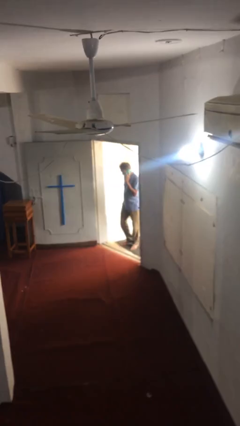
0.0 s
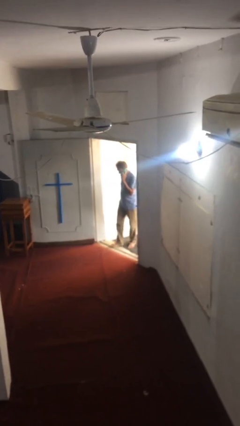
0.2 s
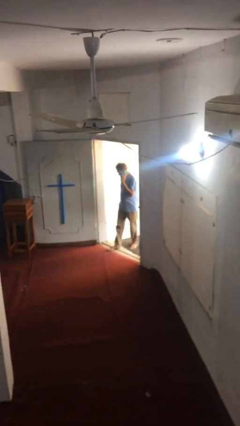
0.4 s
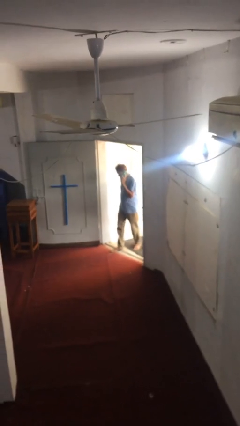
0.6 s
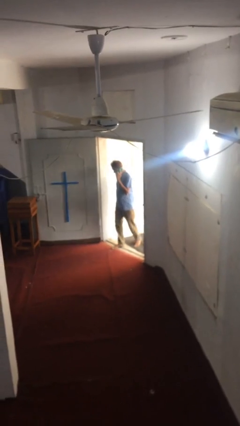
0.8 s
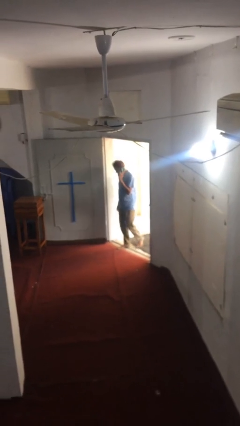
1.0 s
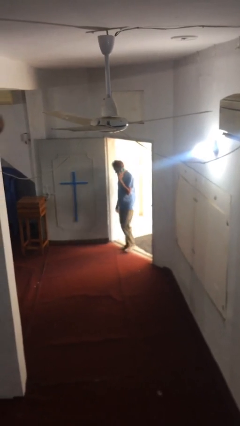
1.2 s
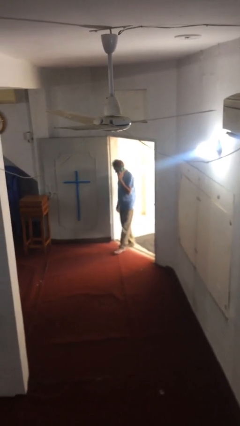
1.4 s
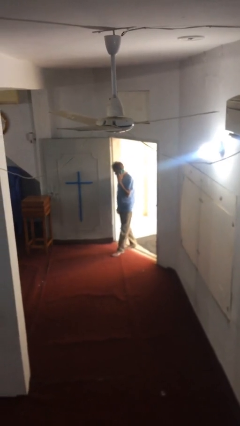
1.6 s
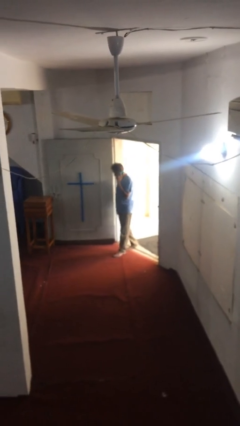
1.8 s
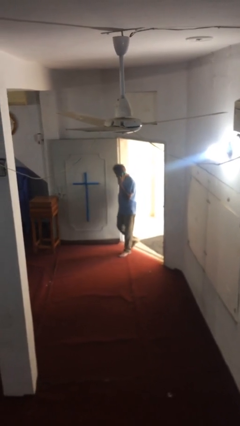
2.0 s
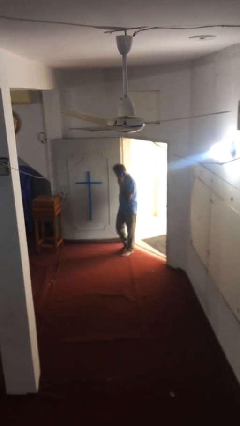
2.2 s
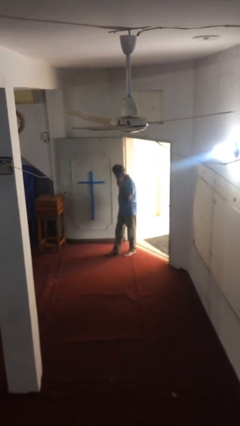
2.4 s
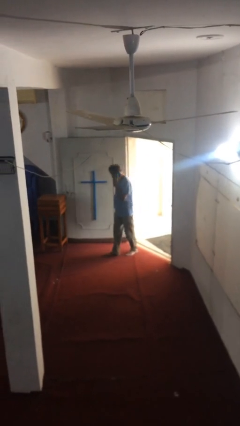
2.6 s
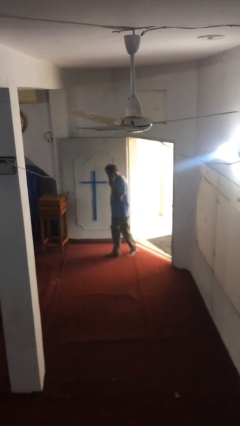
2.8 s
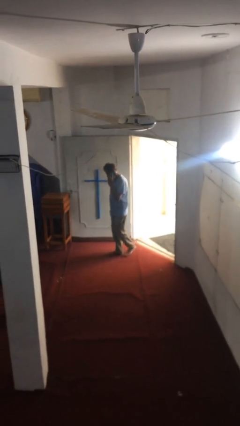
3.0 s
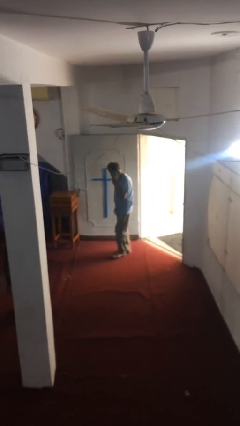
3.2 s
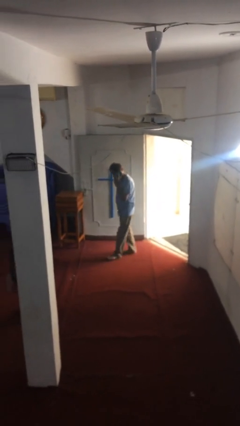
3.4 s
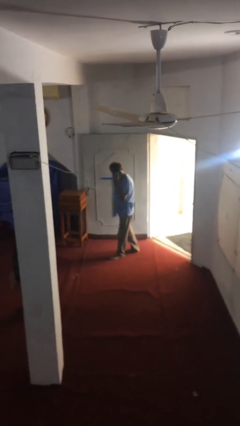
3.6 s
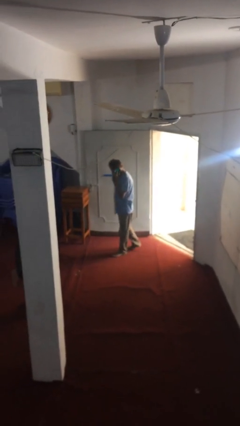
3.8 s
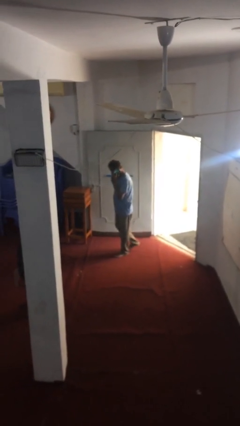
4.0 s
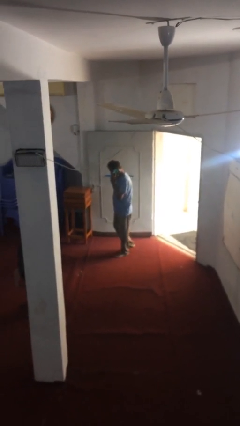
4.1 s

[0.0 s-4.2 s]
person enters scene through structure

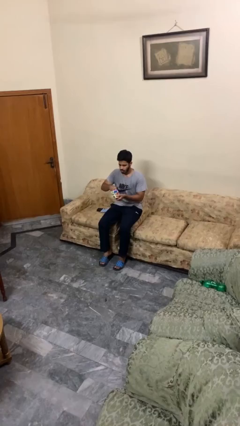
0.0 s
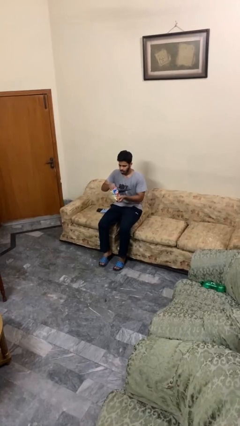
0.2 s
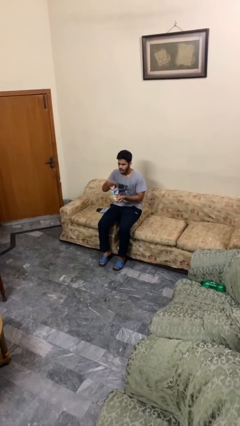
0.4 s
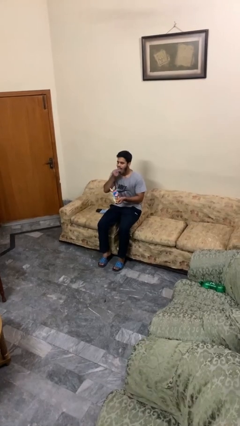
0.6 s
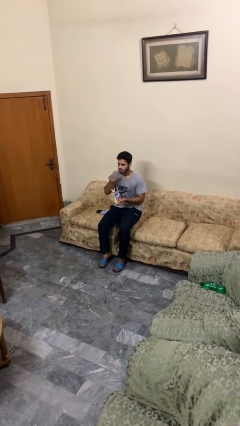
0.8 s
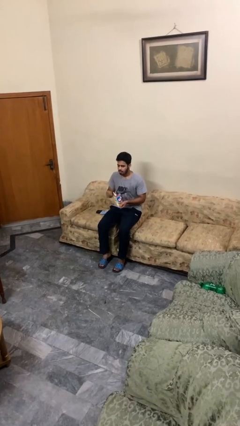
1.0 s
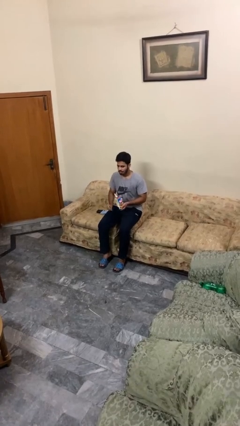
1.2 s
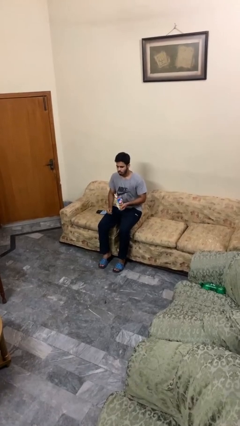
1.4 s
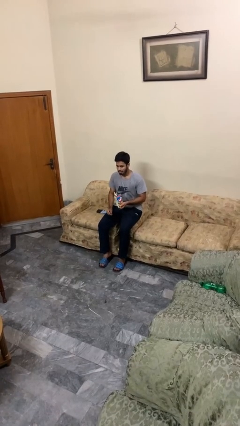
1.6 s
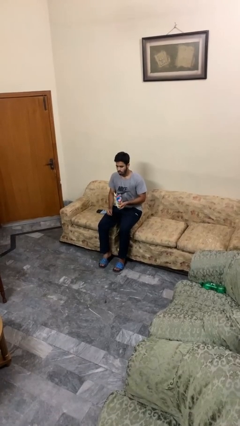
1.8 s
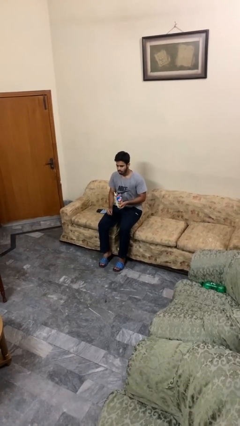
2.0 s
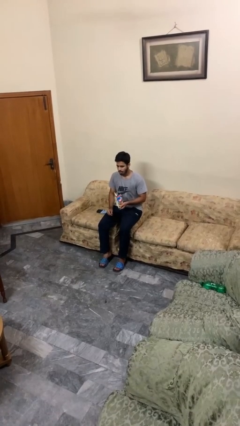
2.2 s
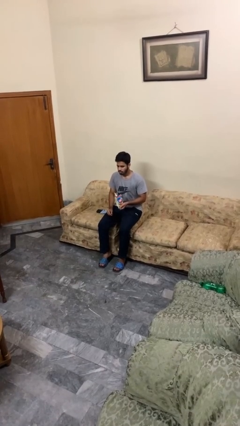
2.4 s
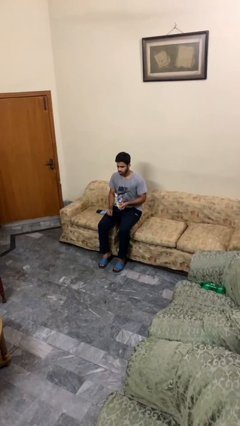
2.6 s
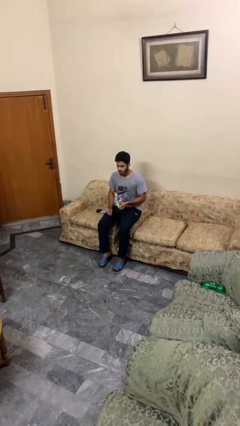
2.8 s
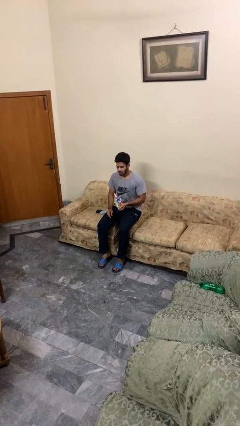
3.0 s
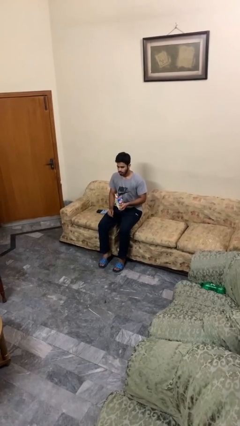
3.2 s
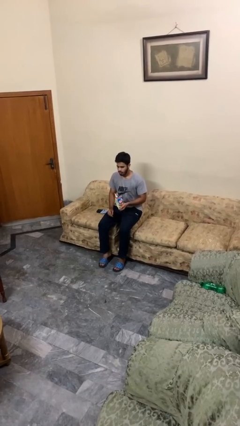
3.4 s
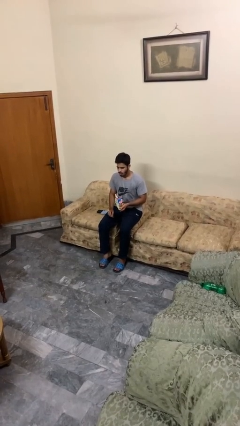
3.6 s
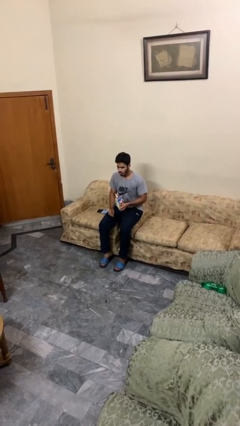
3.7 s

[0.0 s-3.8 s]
person eats snack from bag

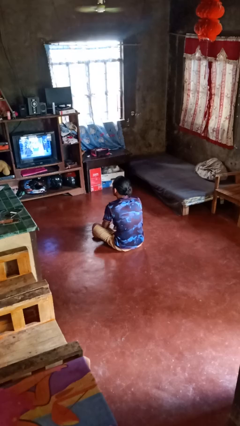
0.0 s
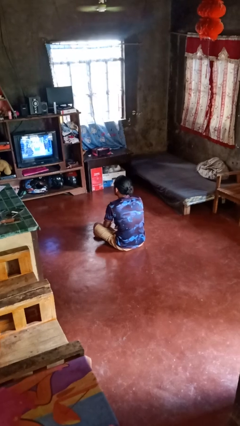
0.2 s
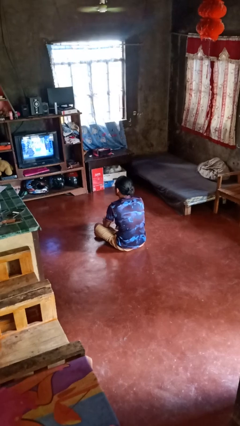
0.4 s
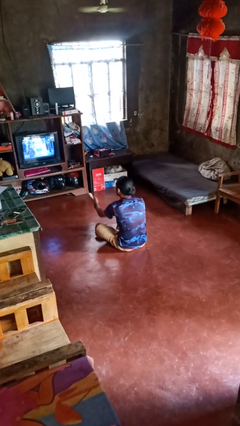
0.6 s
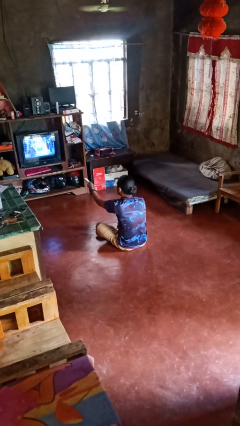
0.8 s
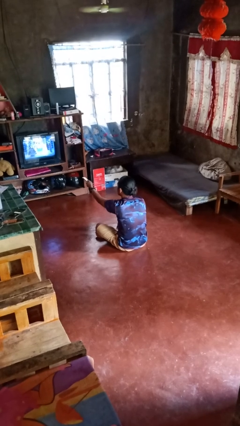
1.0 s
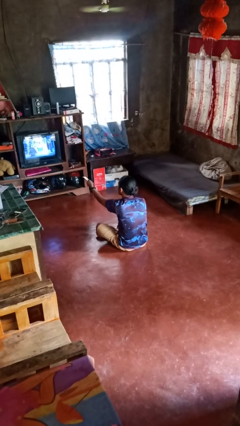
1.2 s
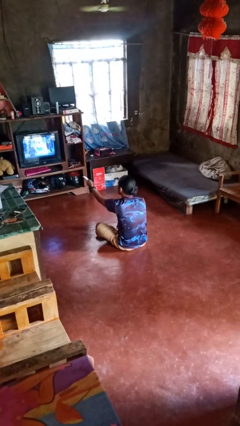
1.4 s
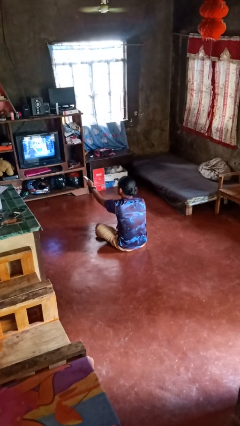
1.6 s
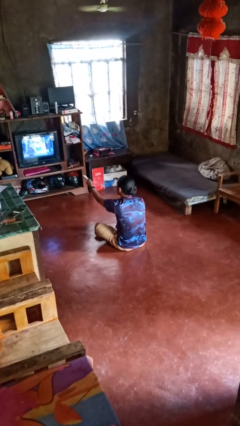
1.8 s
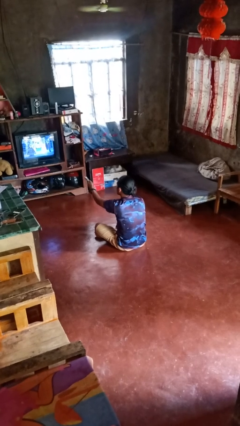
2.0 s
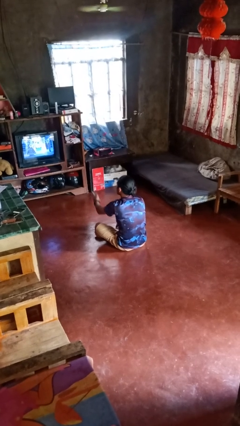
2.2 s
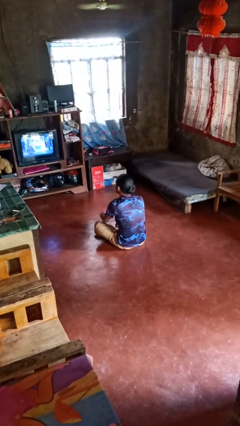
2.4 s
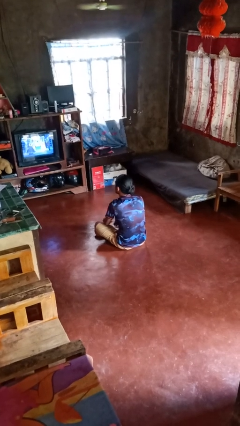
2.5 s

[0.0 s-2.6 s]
person uses television remote

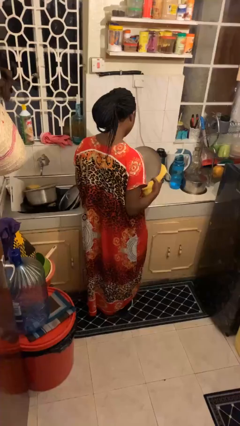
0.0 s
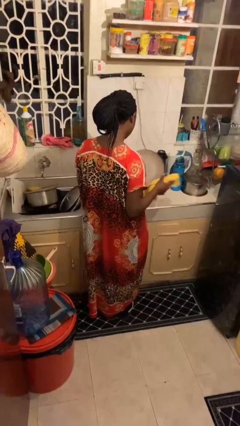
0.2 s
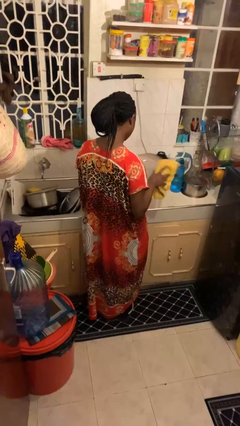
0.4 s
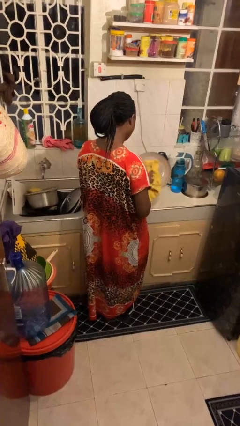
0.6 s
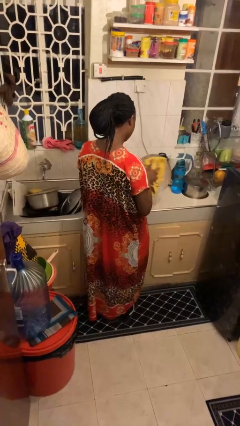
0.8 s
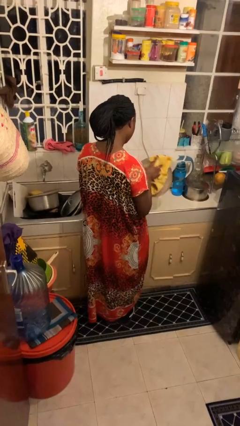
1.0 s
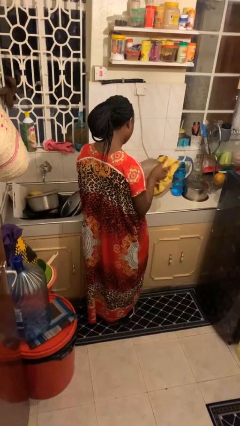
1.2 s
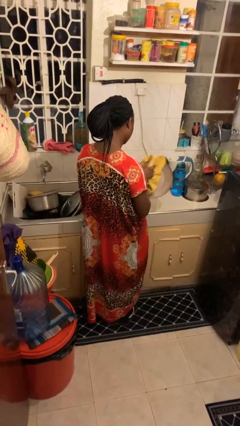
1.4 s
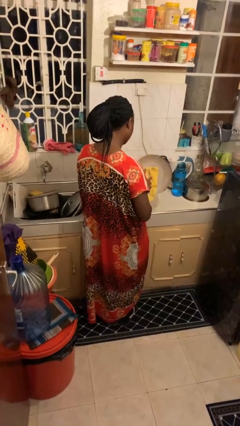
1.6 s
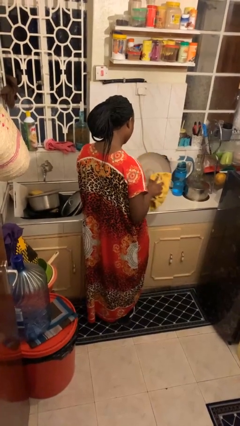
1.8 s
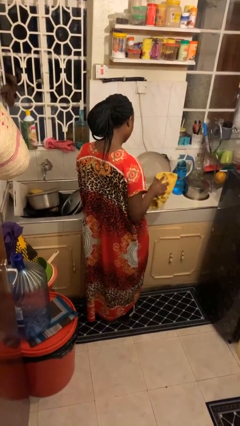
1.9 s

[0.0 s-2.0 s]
person dries dish

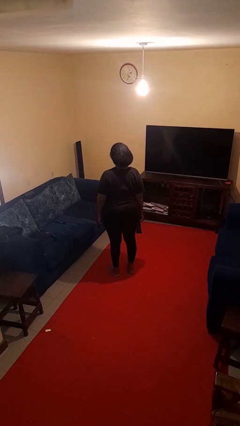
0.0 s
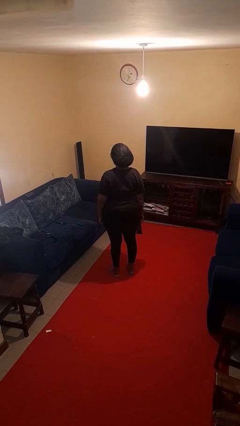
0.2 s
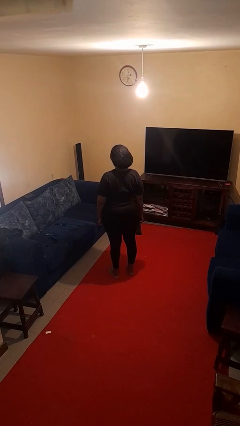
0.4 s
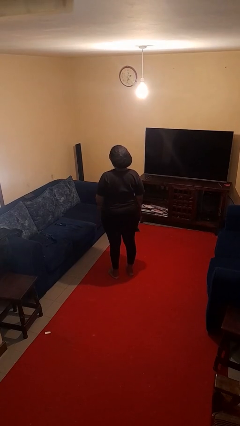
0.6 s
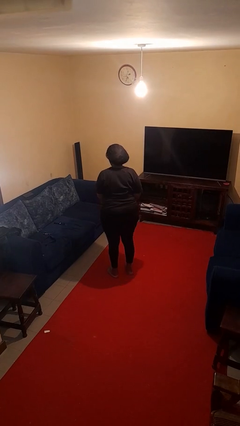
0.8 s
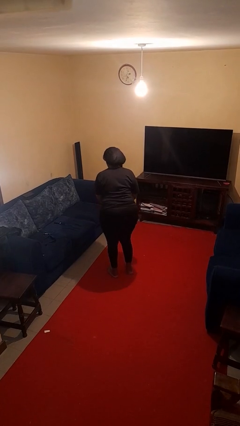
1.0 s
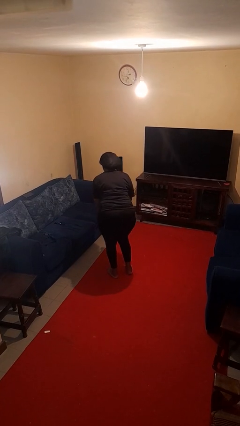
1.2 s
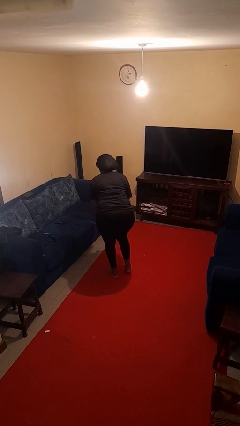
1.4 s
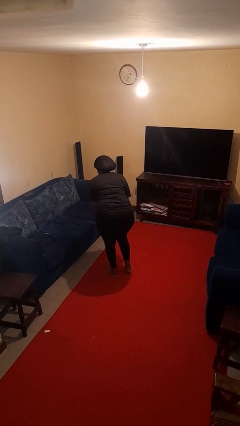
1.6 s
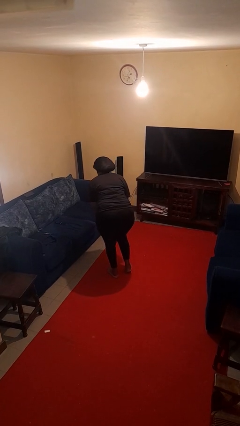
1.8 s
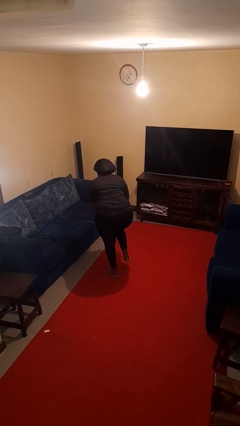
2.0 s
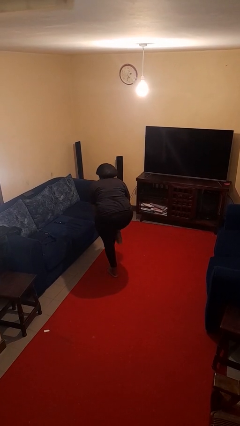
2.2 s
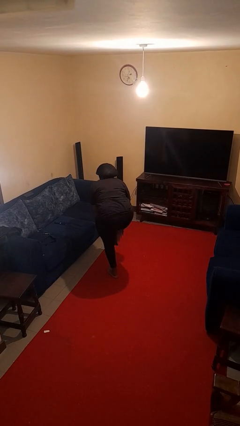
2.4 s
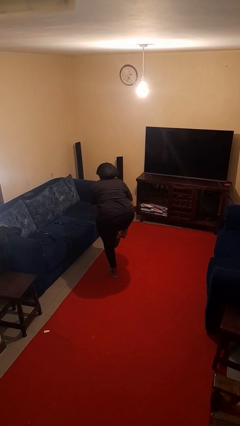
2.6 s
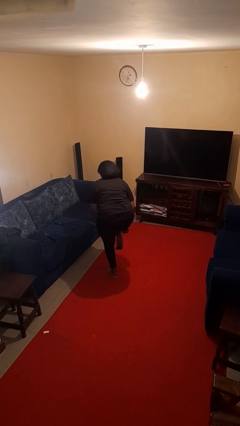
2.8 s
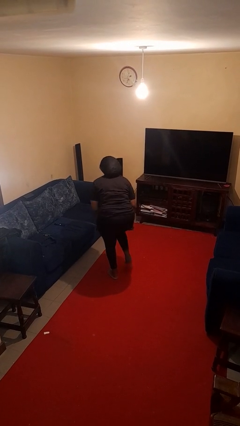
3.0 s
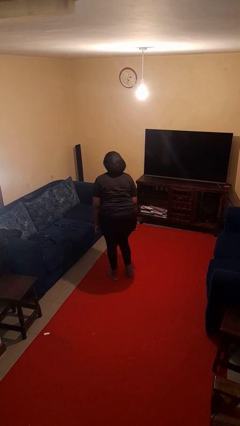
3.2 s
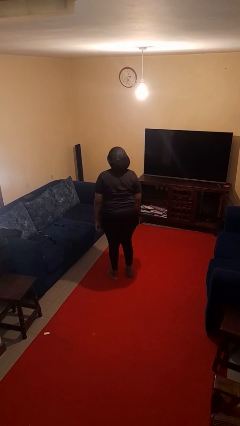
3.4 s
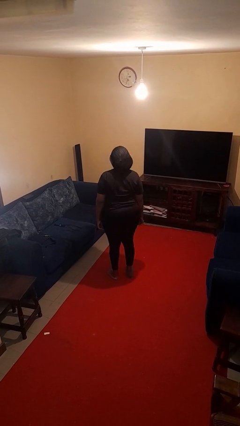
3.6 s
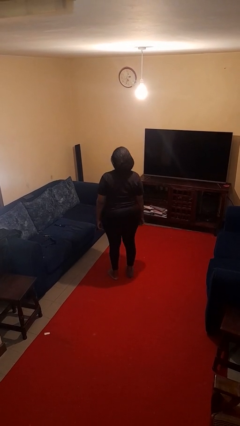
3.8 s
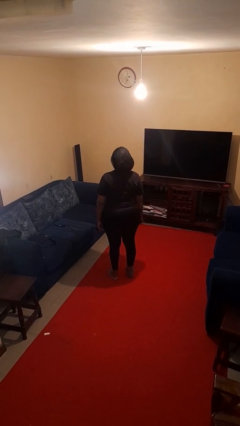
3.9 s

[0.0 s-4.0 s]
person puts on socks

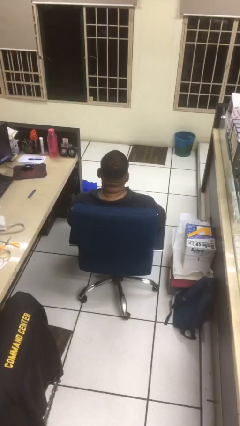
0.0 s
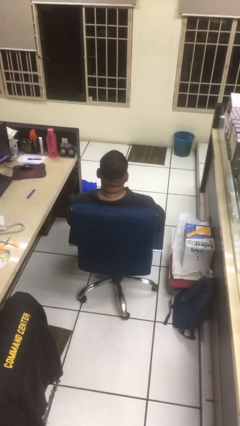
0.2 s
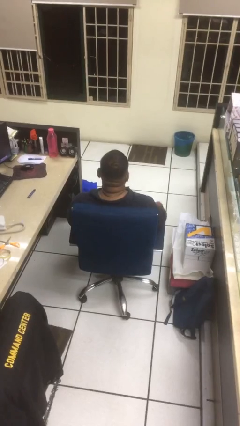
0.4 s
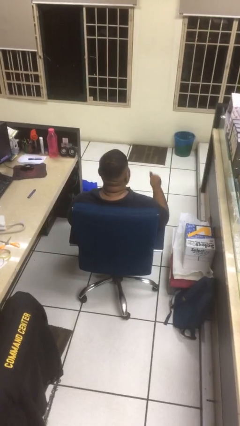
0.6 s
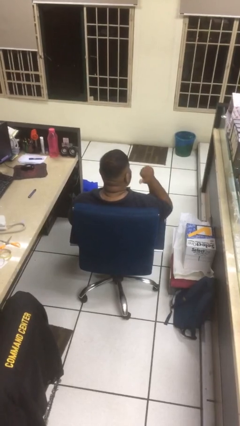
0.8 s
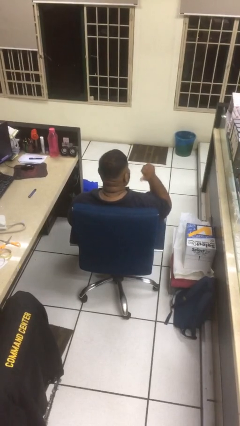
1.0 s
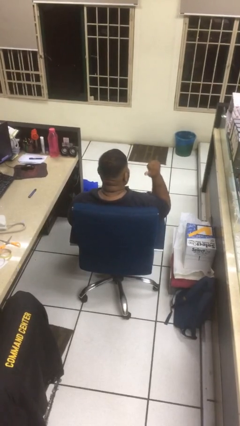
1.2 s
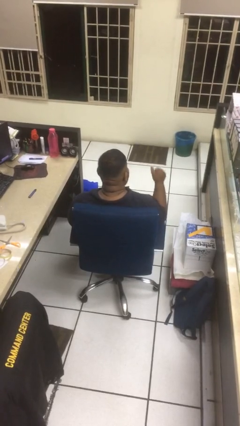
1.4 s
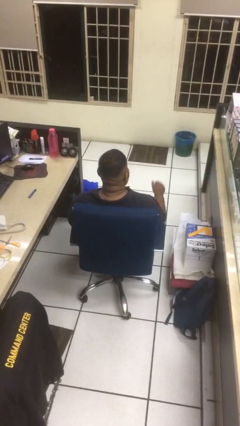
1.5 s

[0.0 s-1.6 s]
person gestures behind me
